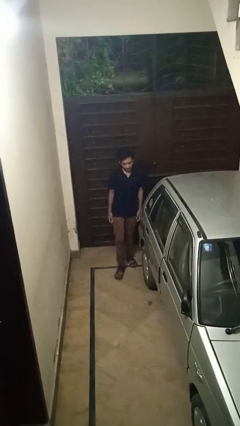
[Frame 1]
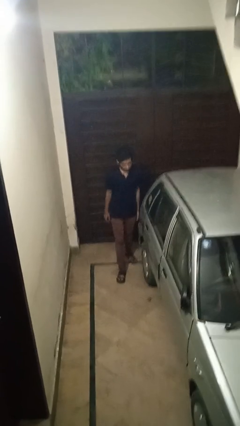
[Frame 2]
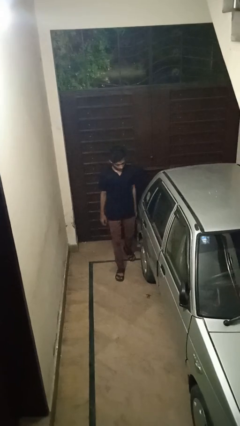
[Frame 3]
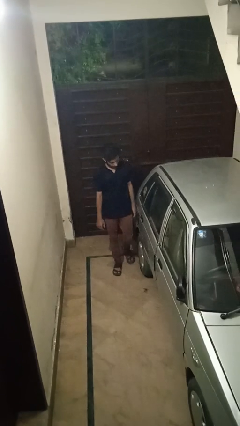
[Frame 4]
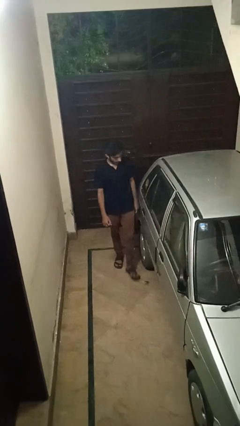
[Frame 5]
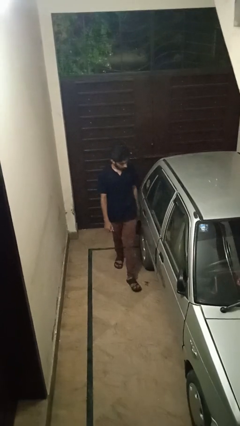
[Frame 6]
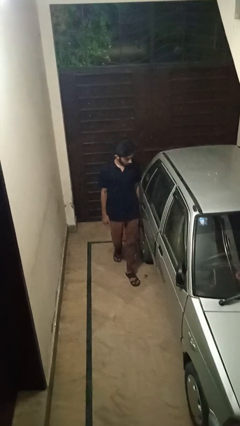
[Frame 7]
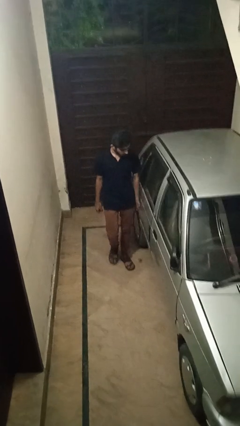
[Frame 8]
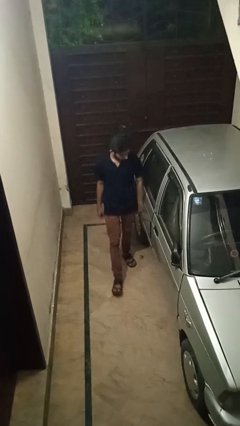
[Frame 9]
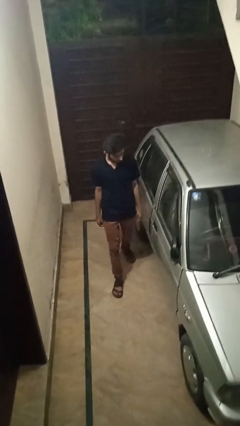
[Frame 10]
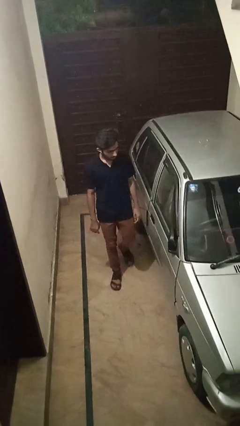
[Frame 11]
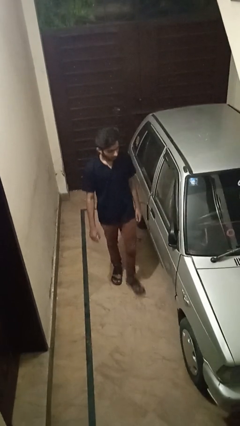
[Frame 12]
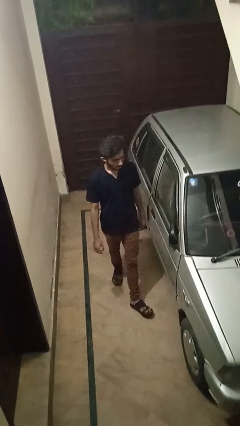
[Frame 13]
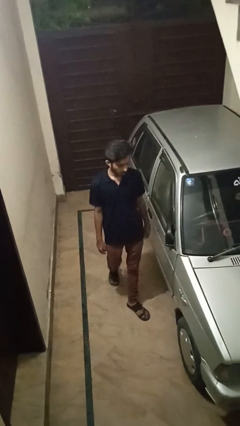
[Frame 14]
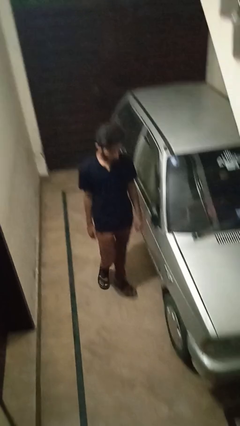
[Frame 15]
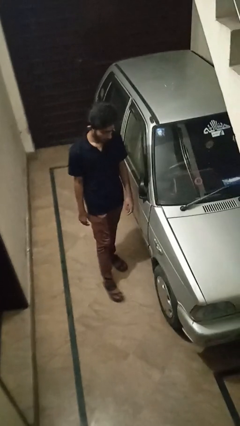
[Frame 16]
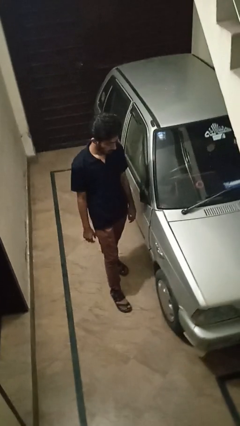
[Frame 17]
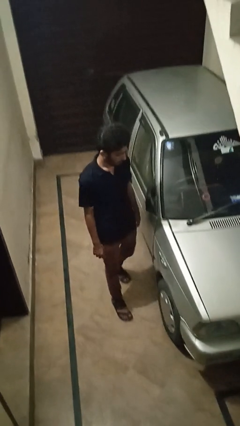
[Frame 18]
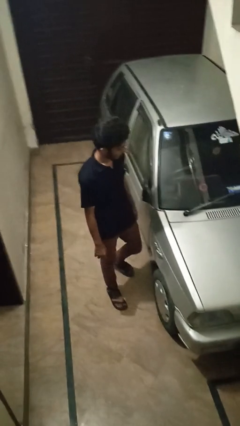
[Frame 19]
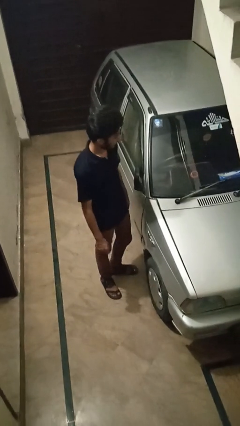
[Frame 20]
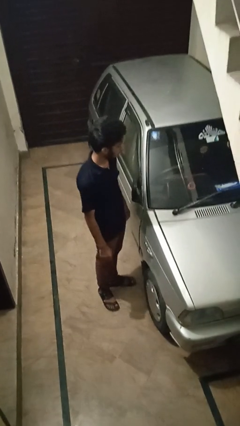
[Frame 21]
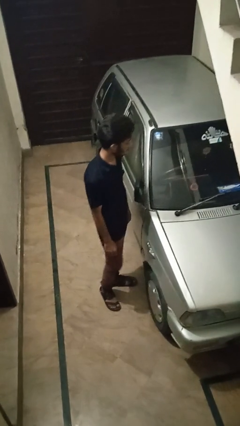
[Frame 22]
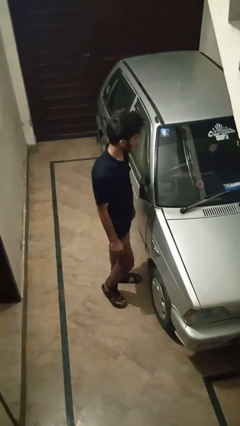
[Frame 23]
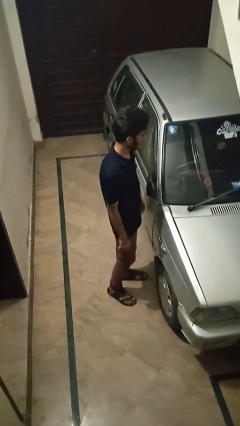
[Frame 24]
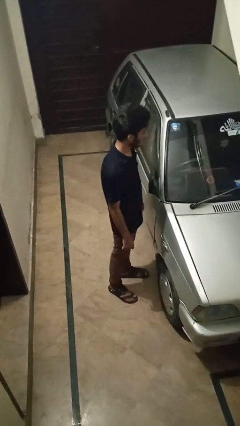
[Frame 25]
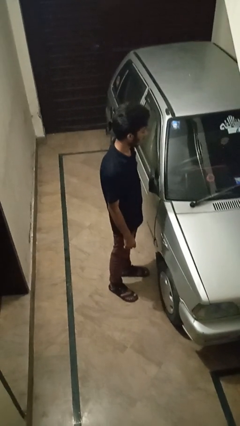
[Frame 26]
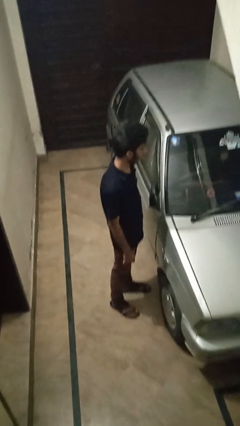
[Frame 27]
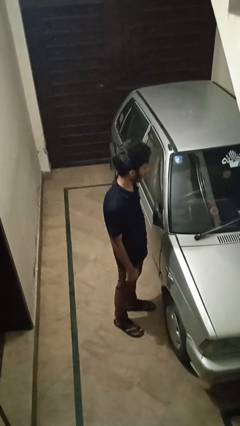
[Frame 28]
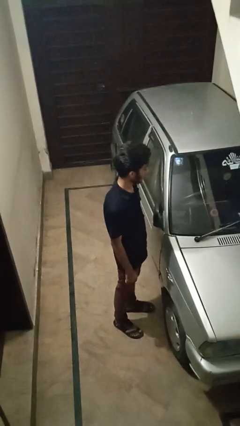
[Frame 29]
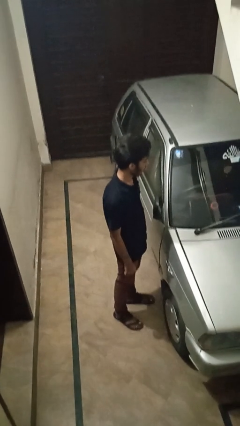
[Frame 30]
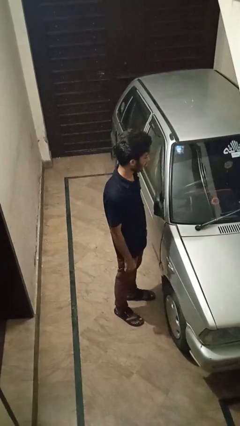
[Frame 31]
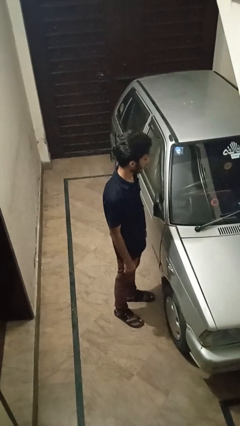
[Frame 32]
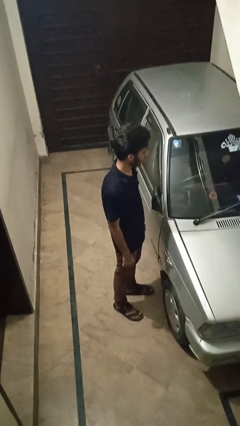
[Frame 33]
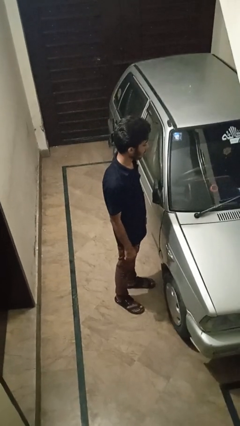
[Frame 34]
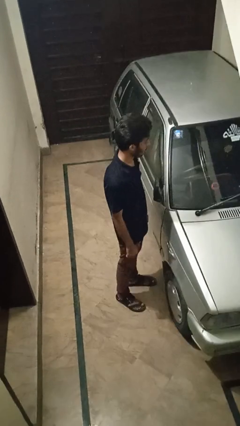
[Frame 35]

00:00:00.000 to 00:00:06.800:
person walks around car

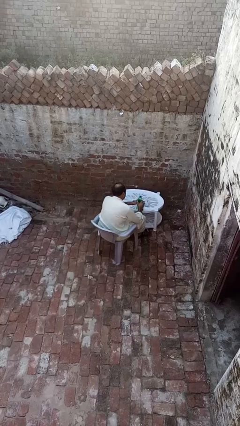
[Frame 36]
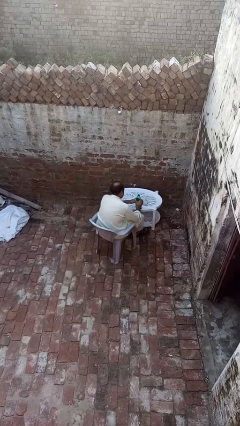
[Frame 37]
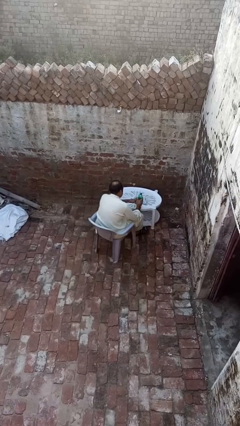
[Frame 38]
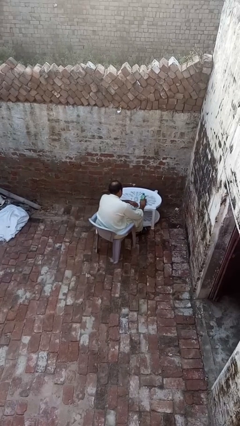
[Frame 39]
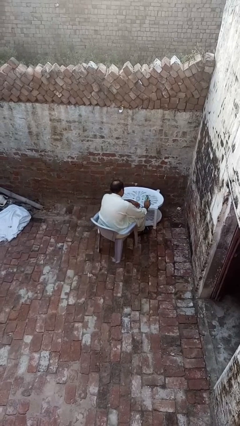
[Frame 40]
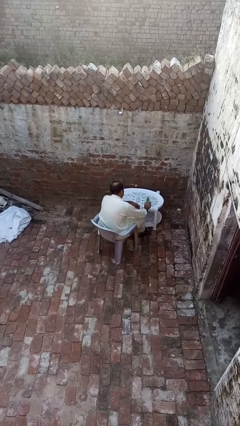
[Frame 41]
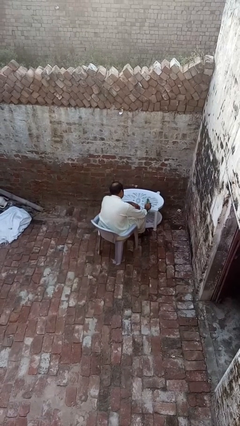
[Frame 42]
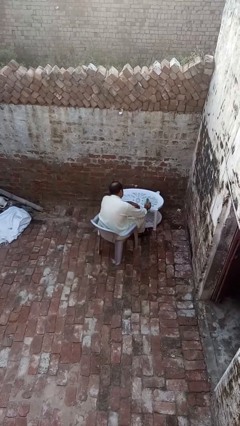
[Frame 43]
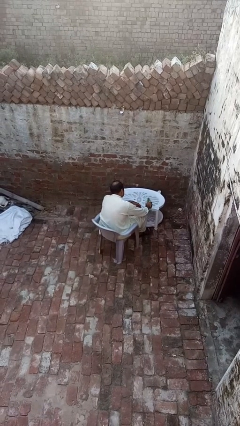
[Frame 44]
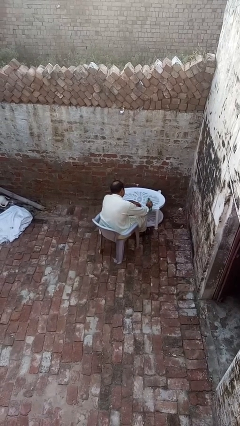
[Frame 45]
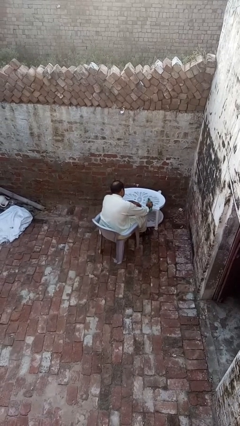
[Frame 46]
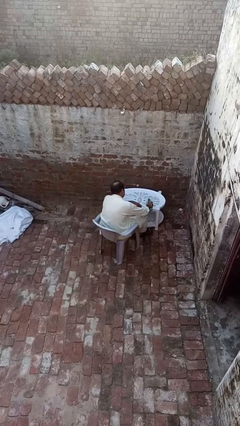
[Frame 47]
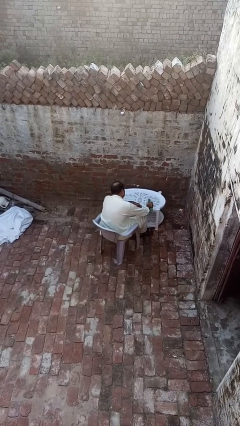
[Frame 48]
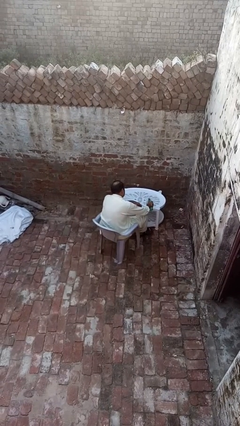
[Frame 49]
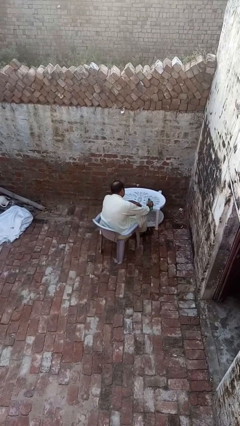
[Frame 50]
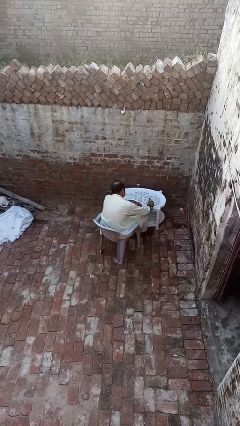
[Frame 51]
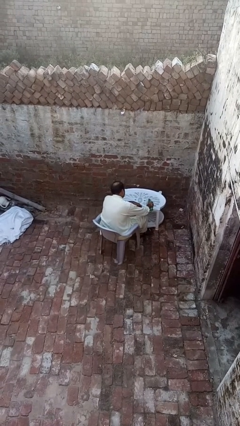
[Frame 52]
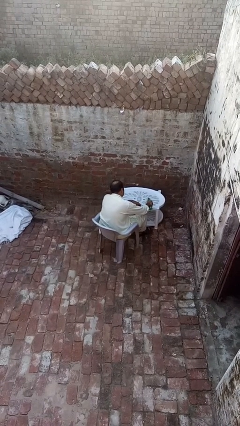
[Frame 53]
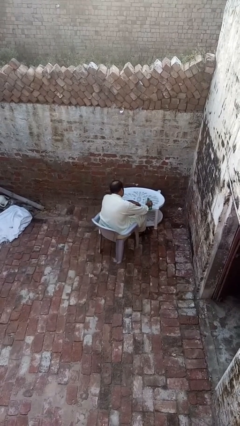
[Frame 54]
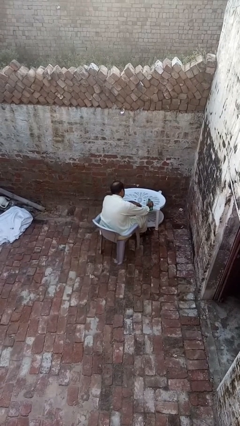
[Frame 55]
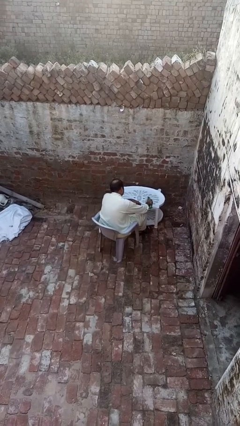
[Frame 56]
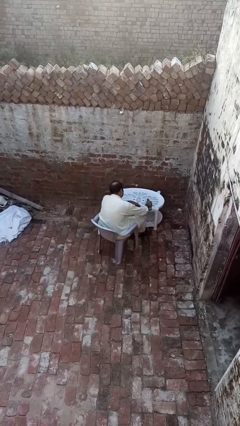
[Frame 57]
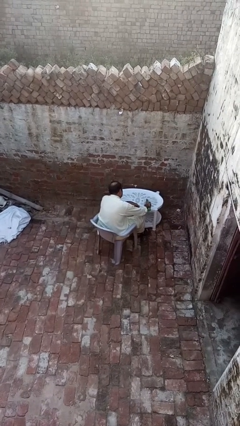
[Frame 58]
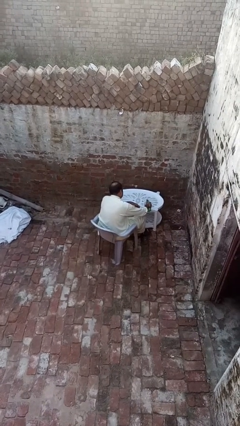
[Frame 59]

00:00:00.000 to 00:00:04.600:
person pours liquid into cup

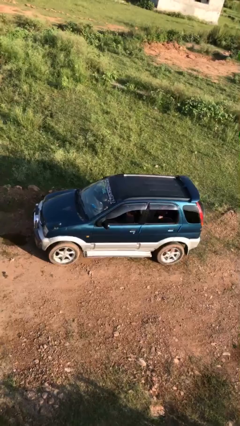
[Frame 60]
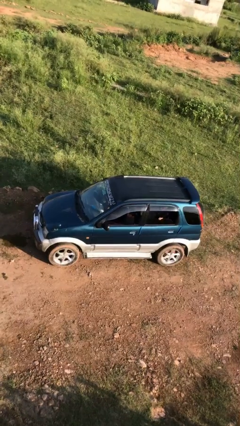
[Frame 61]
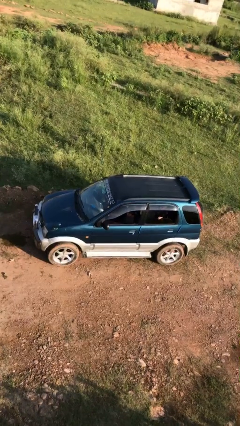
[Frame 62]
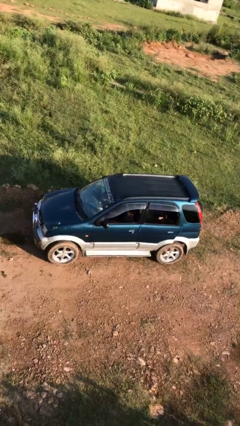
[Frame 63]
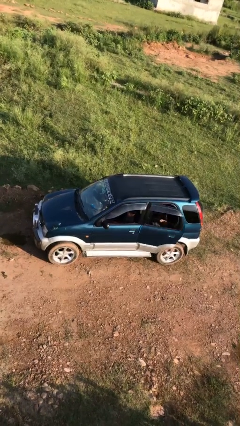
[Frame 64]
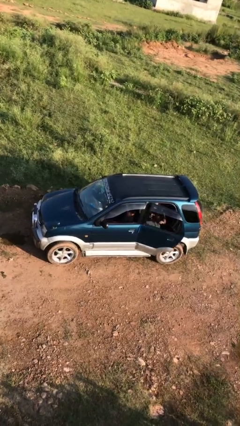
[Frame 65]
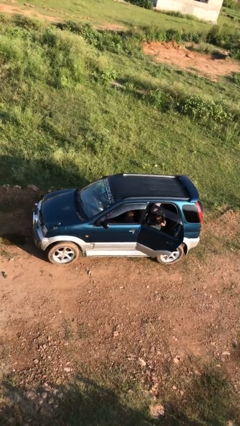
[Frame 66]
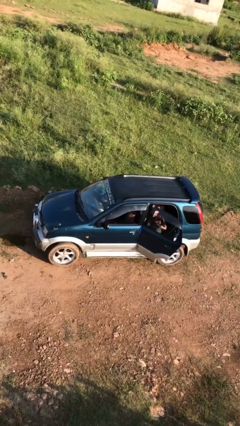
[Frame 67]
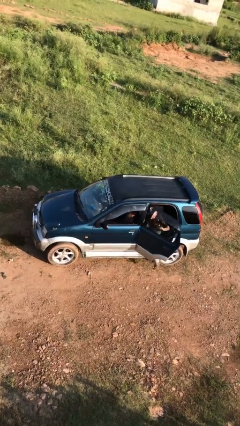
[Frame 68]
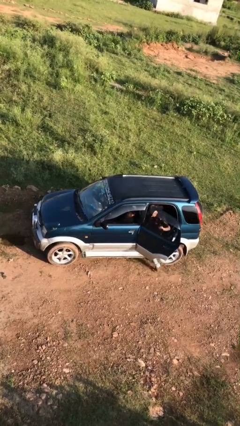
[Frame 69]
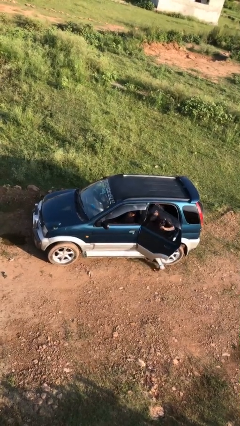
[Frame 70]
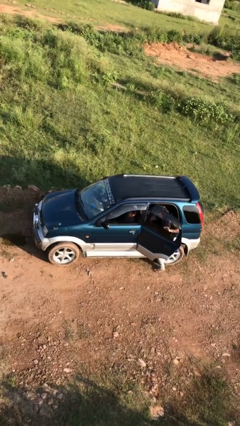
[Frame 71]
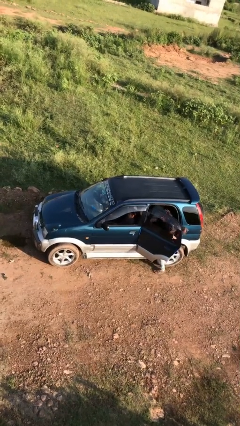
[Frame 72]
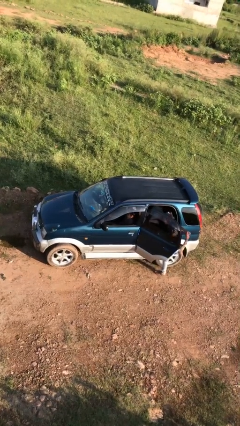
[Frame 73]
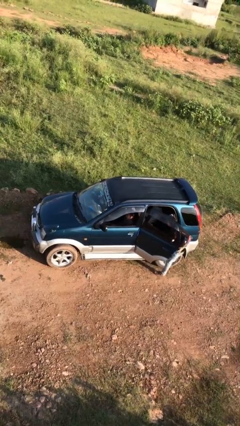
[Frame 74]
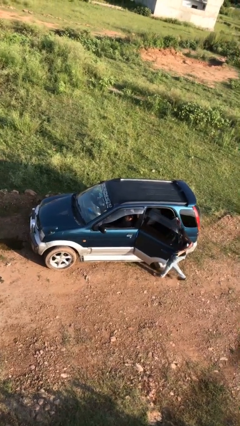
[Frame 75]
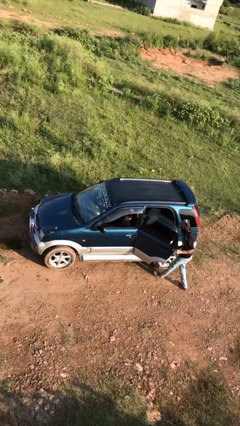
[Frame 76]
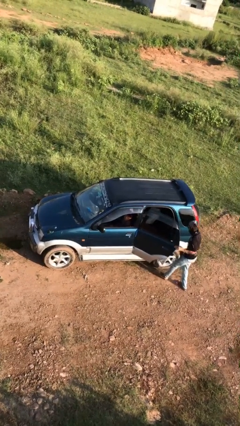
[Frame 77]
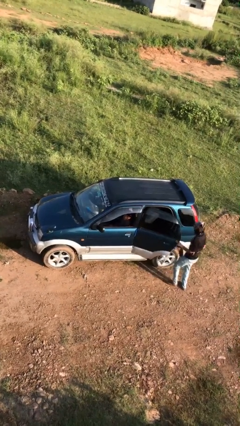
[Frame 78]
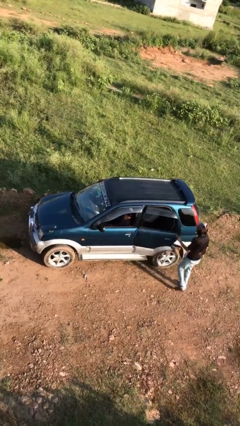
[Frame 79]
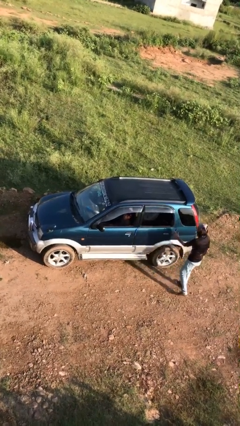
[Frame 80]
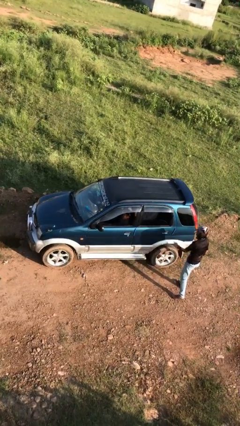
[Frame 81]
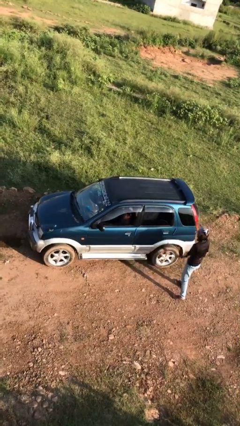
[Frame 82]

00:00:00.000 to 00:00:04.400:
car drops off person

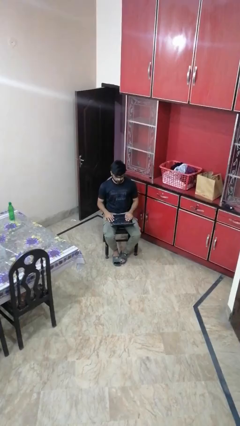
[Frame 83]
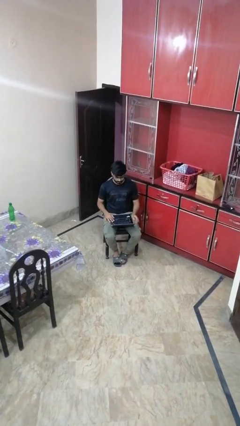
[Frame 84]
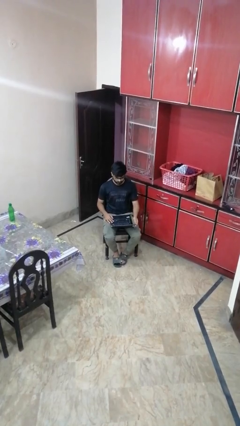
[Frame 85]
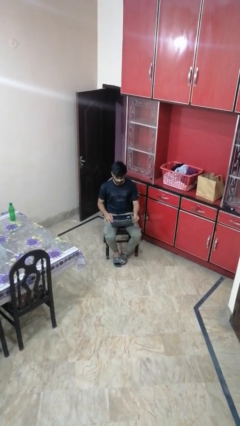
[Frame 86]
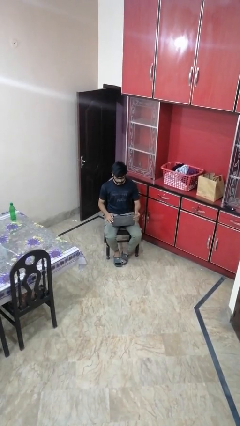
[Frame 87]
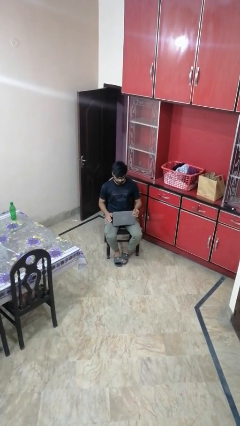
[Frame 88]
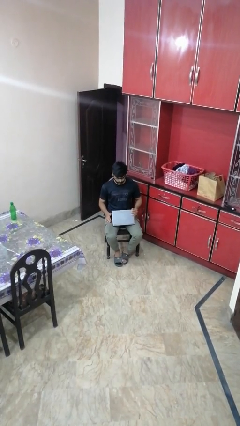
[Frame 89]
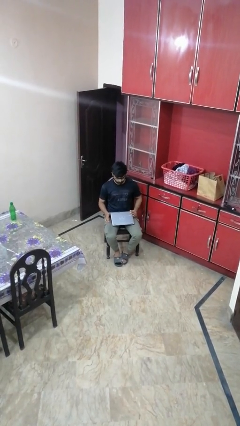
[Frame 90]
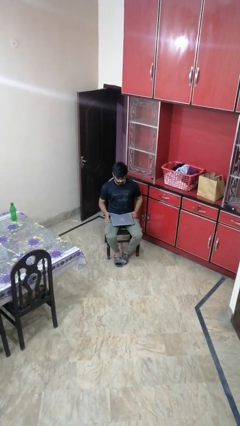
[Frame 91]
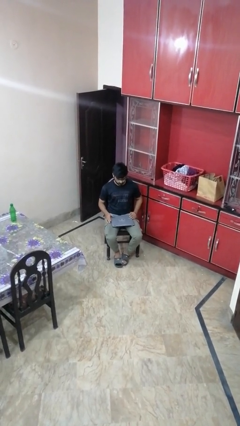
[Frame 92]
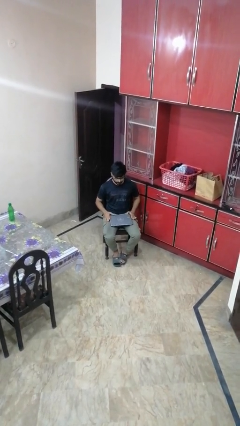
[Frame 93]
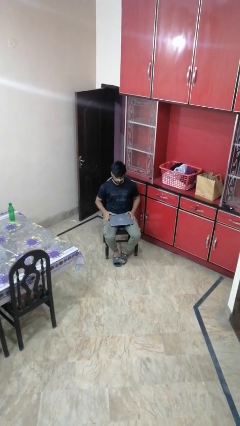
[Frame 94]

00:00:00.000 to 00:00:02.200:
person closes laptop
